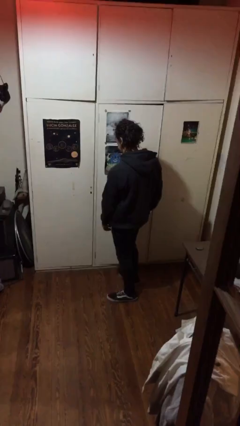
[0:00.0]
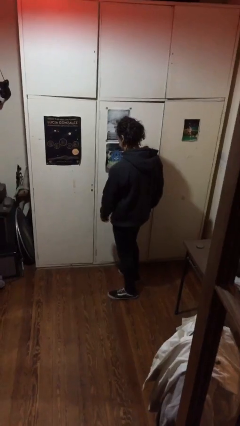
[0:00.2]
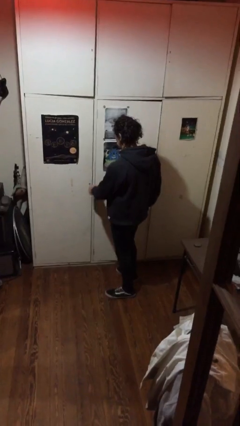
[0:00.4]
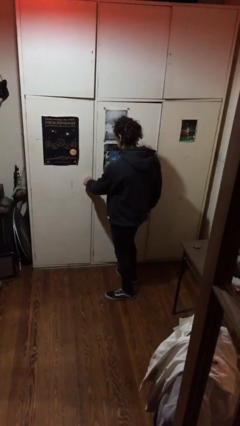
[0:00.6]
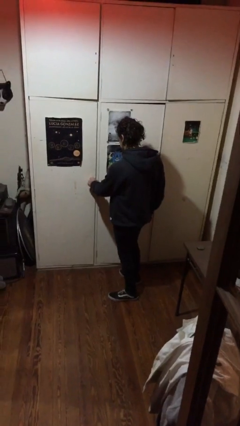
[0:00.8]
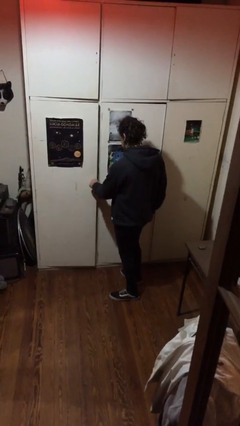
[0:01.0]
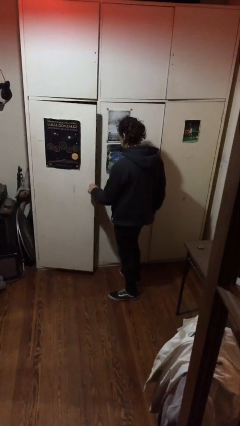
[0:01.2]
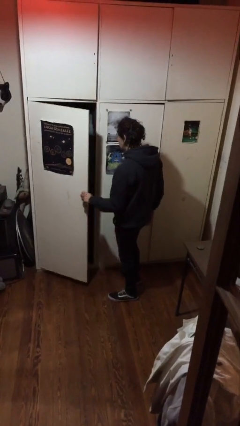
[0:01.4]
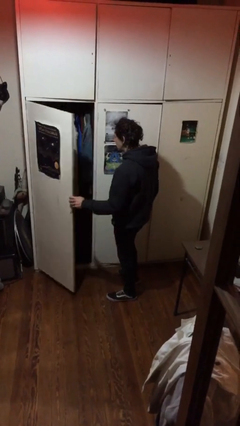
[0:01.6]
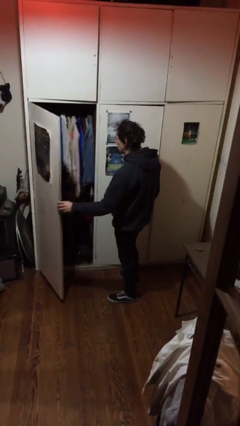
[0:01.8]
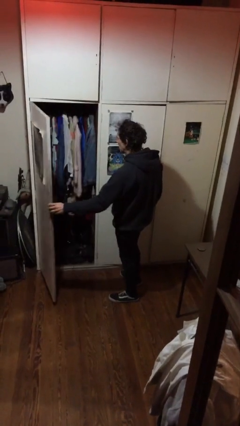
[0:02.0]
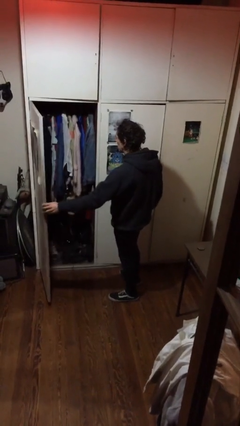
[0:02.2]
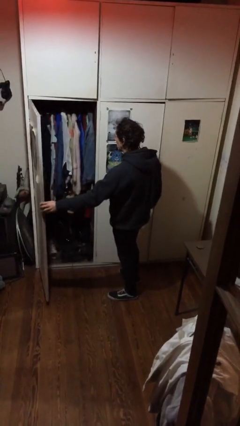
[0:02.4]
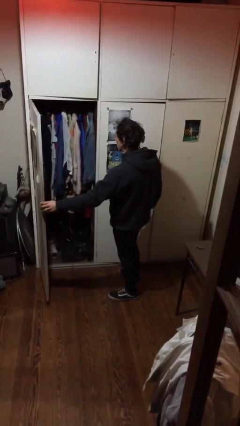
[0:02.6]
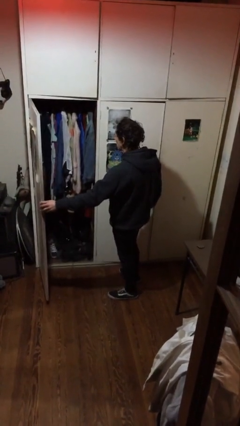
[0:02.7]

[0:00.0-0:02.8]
person opens closet door

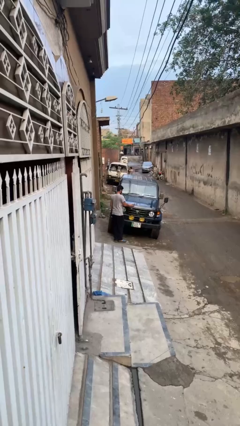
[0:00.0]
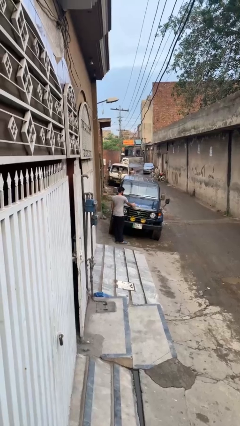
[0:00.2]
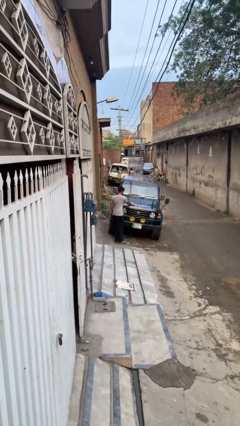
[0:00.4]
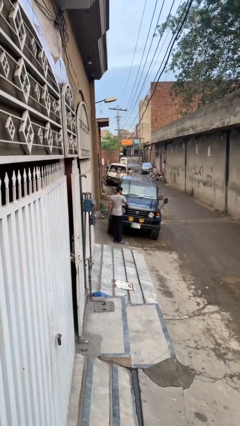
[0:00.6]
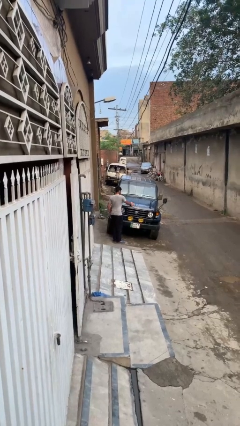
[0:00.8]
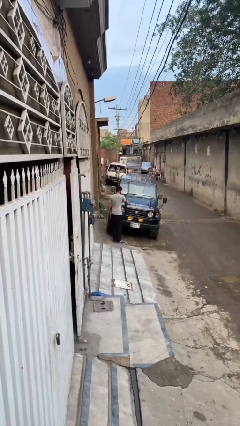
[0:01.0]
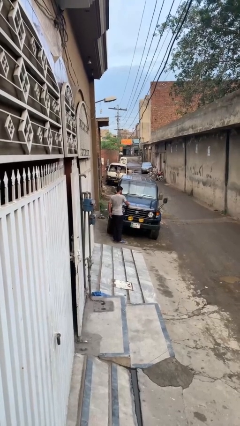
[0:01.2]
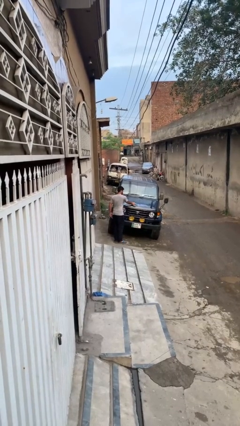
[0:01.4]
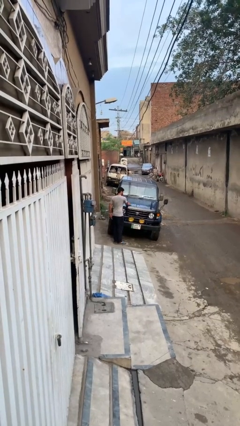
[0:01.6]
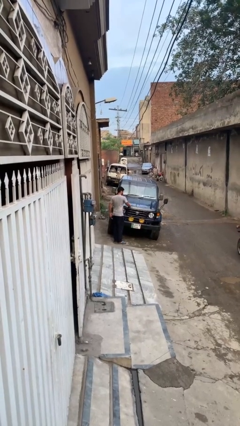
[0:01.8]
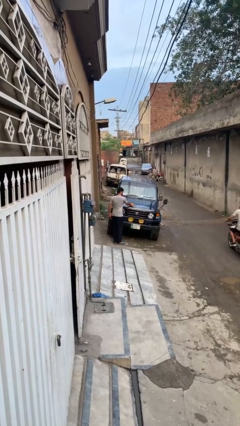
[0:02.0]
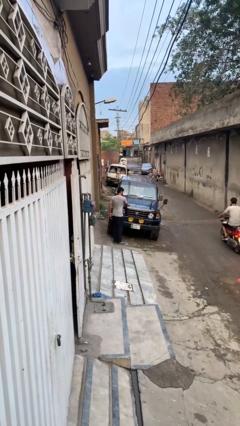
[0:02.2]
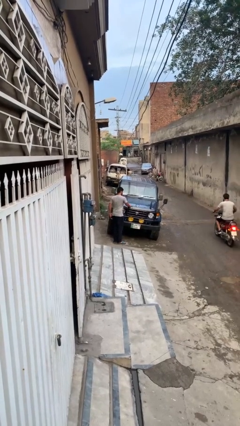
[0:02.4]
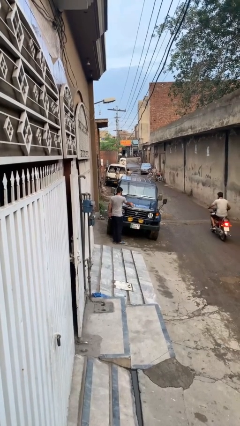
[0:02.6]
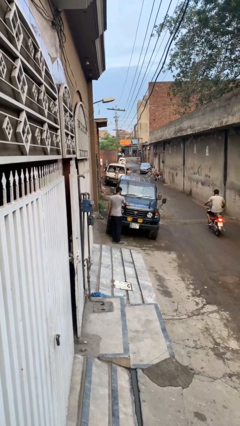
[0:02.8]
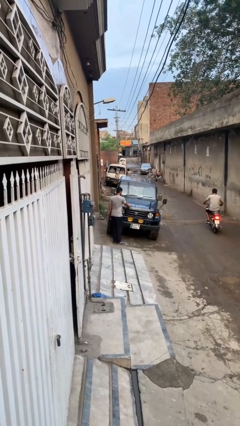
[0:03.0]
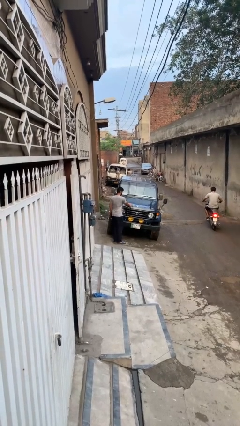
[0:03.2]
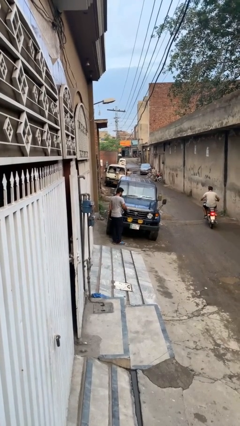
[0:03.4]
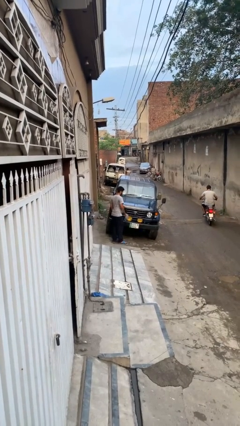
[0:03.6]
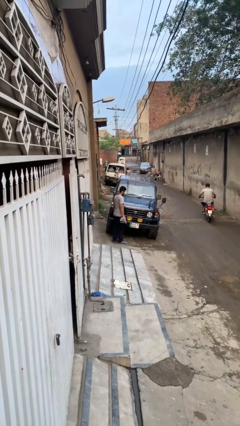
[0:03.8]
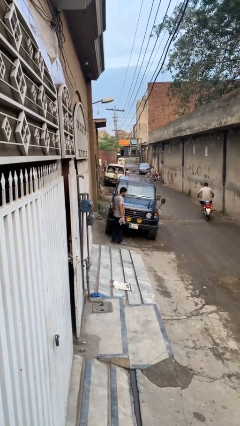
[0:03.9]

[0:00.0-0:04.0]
person polishes car with rag

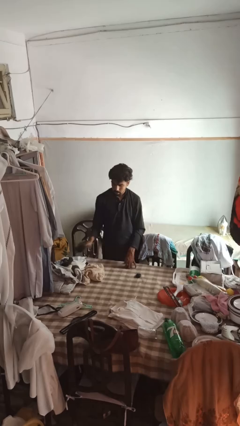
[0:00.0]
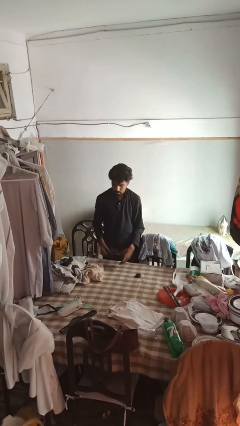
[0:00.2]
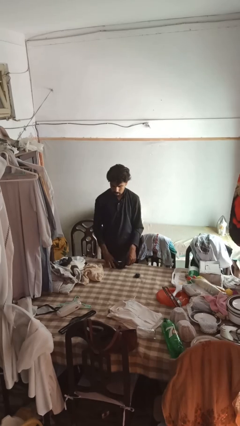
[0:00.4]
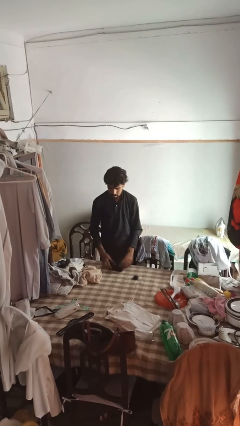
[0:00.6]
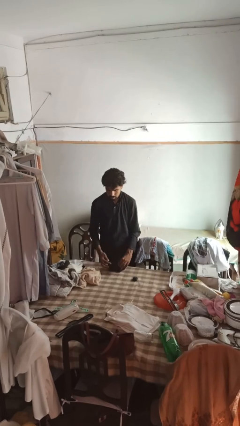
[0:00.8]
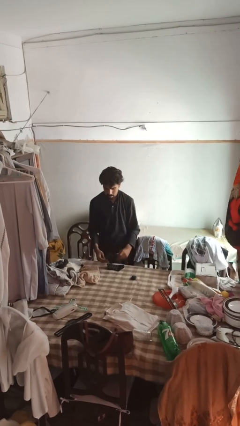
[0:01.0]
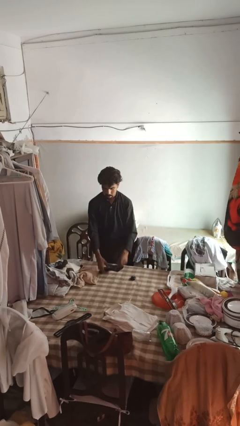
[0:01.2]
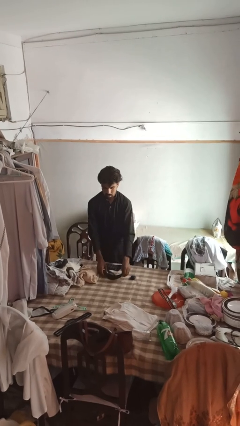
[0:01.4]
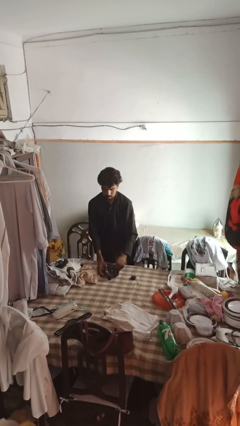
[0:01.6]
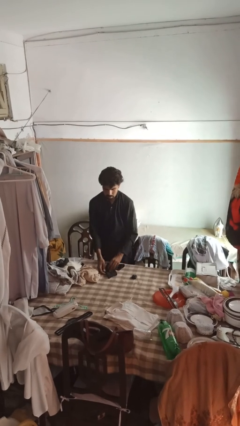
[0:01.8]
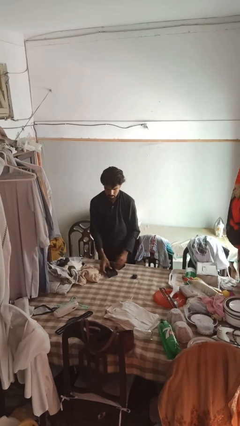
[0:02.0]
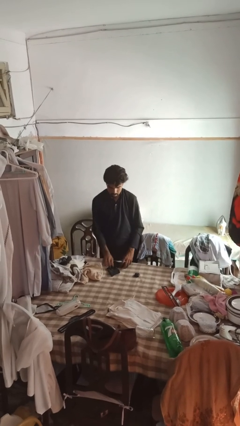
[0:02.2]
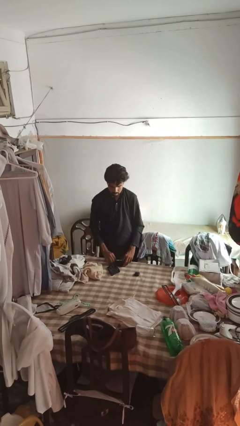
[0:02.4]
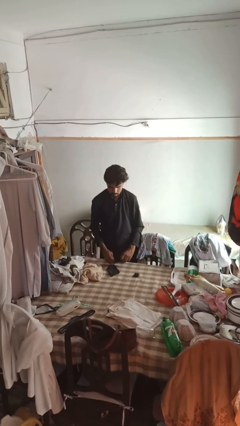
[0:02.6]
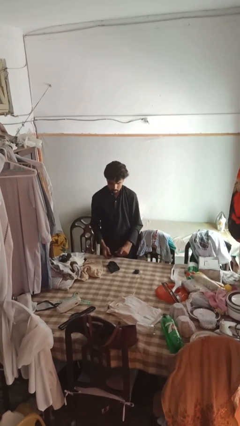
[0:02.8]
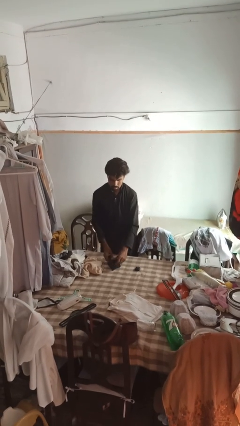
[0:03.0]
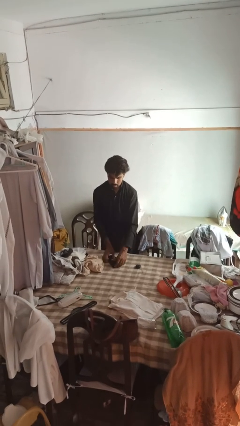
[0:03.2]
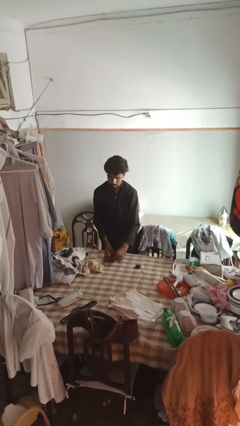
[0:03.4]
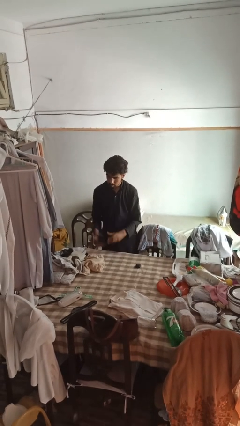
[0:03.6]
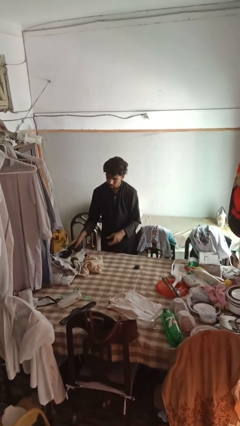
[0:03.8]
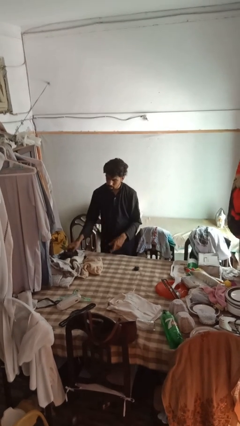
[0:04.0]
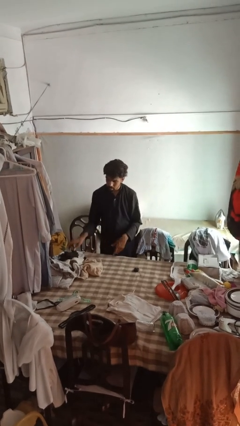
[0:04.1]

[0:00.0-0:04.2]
person folds socks

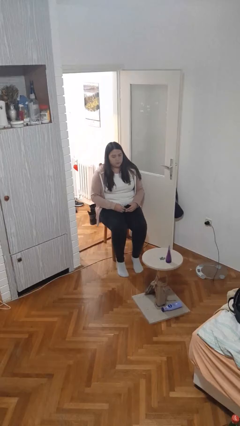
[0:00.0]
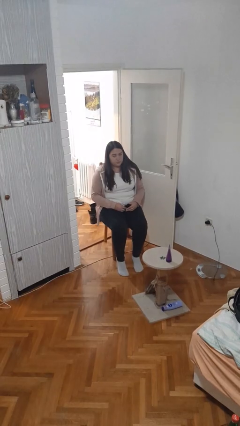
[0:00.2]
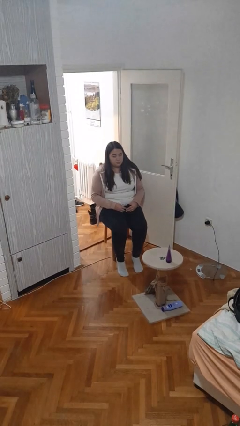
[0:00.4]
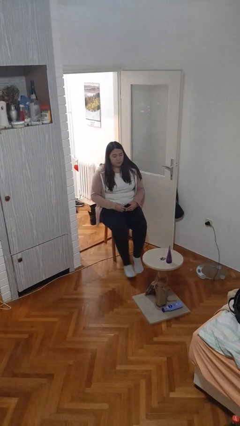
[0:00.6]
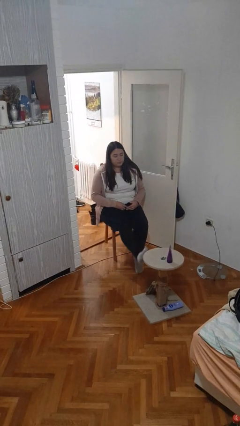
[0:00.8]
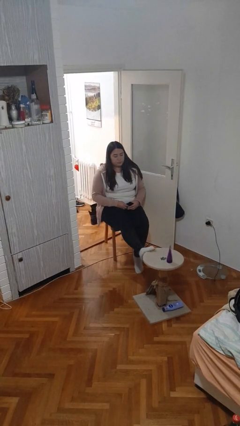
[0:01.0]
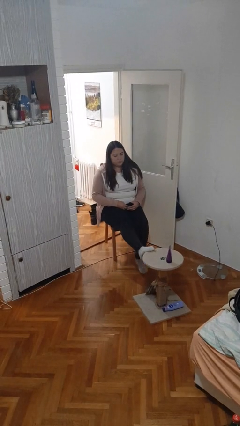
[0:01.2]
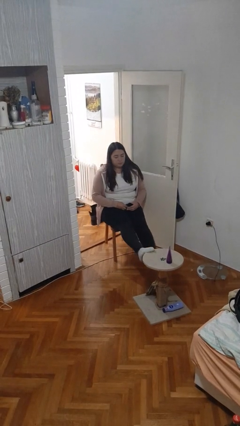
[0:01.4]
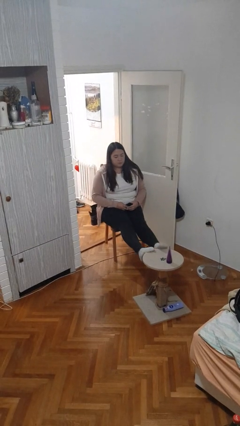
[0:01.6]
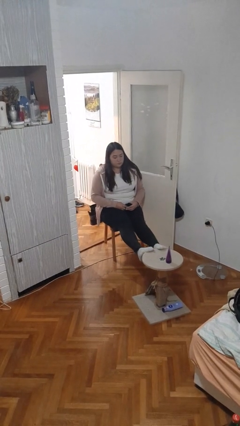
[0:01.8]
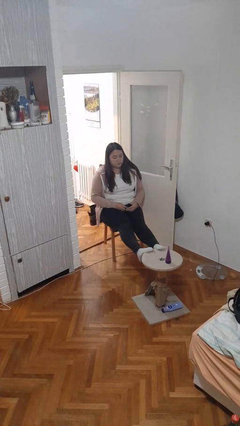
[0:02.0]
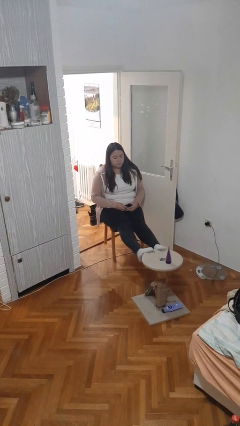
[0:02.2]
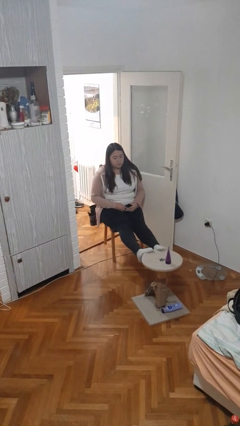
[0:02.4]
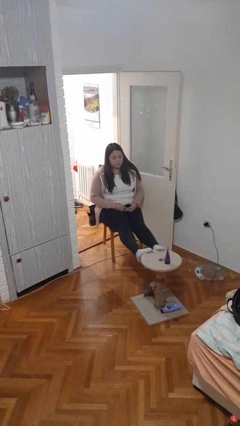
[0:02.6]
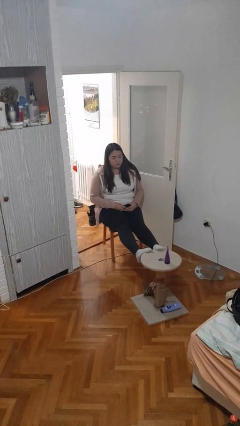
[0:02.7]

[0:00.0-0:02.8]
person puts feet up

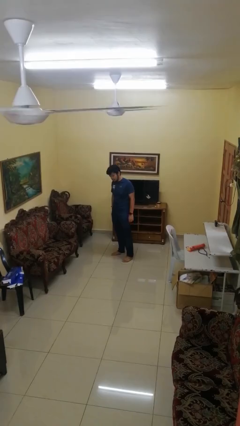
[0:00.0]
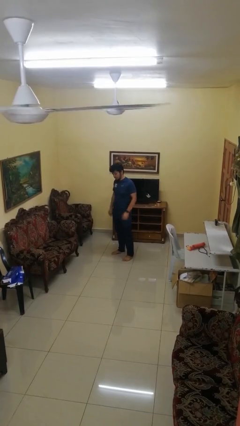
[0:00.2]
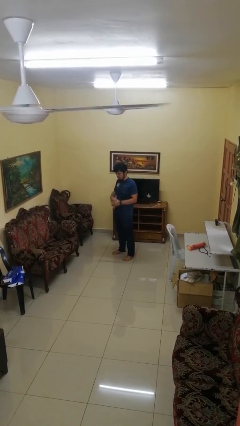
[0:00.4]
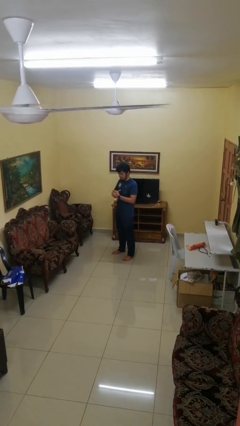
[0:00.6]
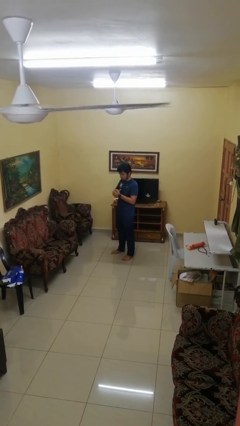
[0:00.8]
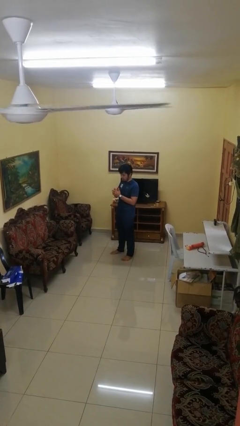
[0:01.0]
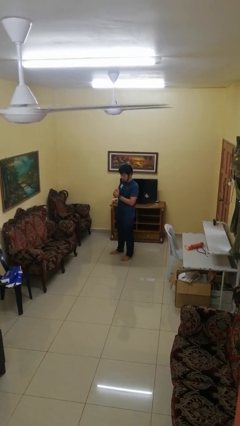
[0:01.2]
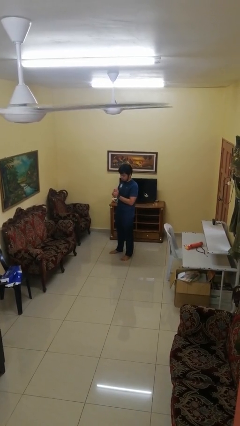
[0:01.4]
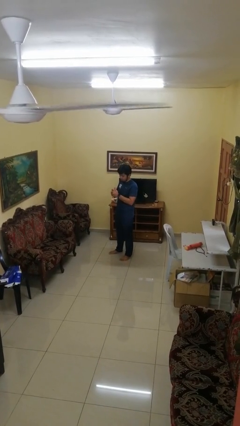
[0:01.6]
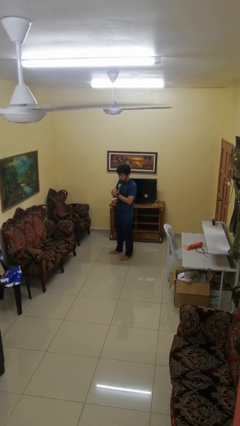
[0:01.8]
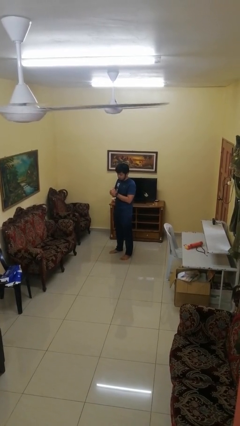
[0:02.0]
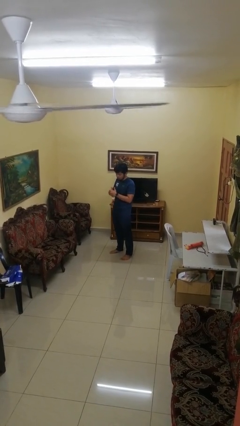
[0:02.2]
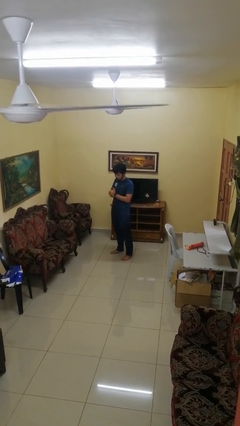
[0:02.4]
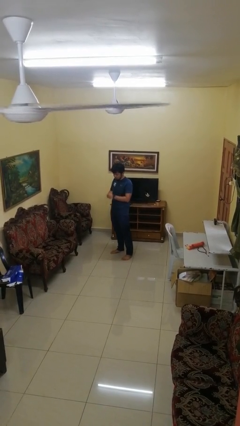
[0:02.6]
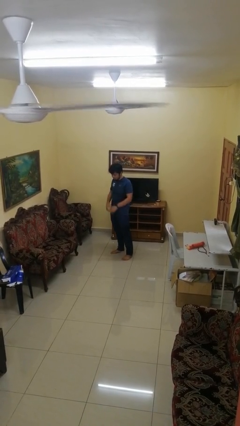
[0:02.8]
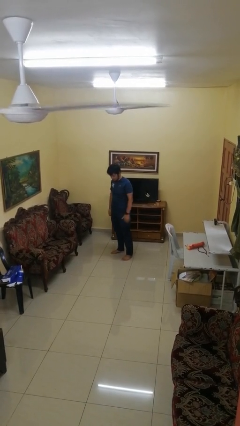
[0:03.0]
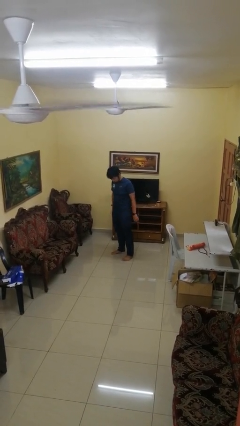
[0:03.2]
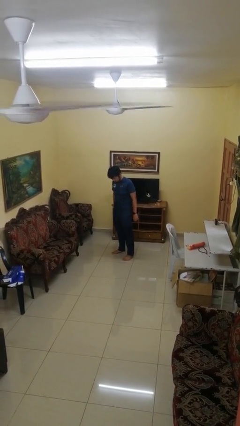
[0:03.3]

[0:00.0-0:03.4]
person cracks knuckles

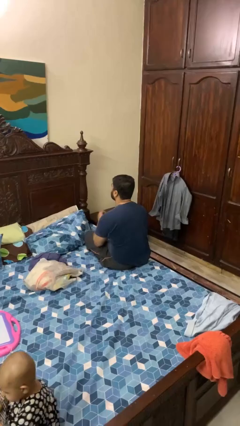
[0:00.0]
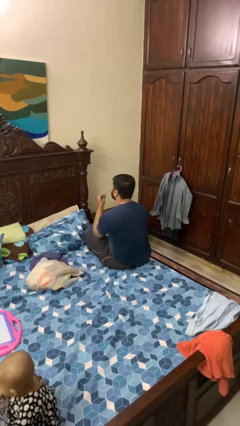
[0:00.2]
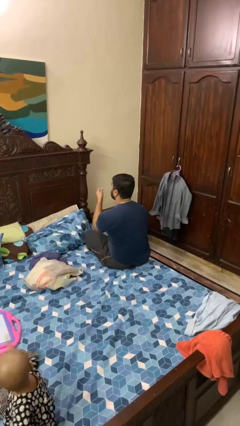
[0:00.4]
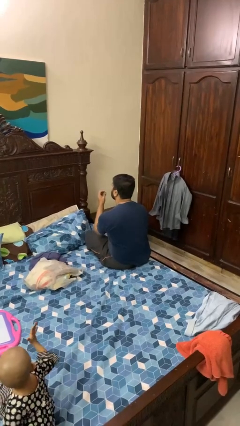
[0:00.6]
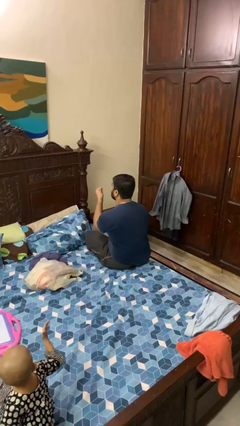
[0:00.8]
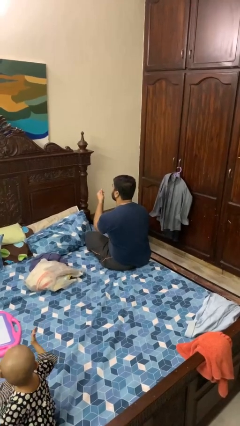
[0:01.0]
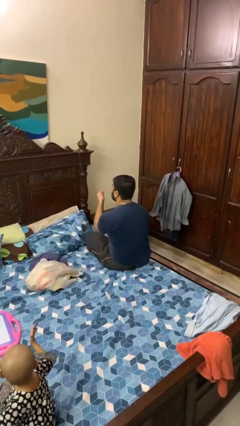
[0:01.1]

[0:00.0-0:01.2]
person snaps fingers
